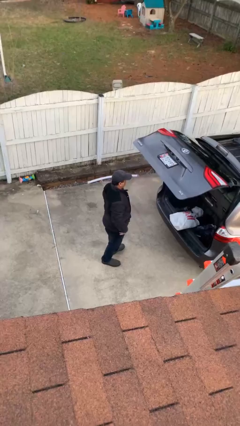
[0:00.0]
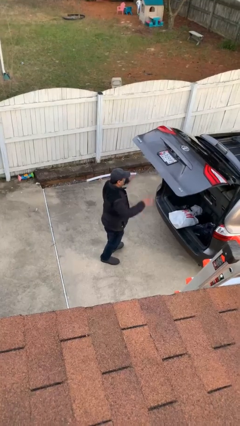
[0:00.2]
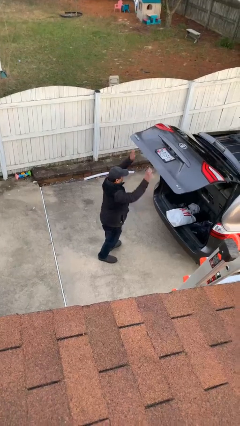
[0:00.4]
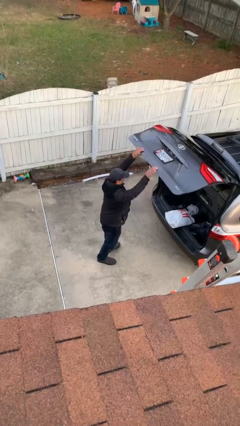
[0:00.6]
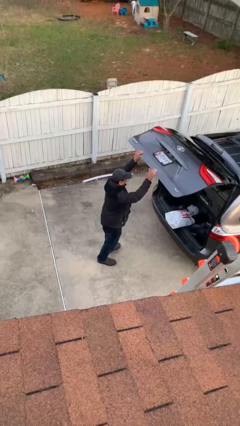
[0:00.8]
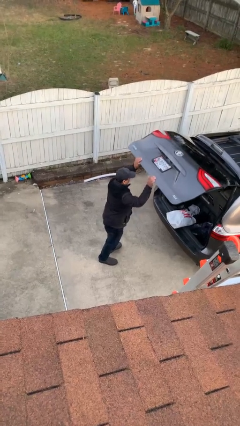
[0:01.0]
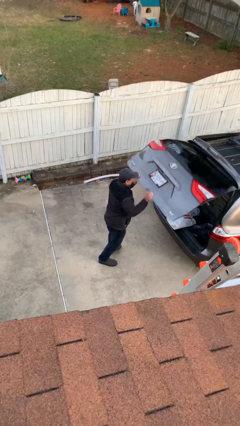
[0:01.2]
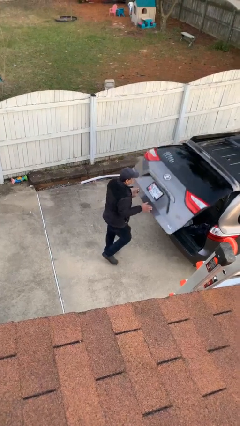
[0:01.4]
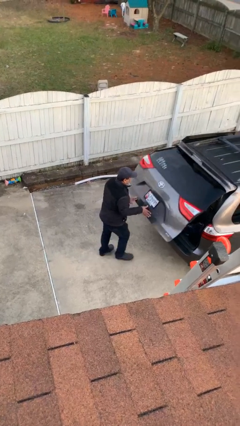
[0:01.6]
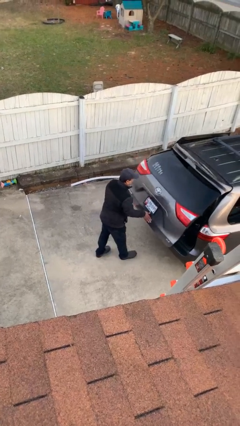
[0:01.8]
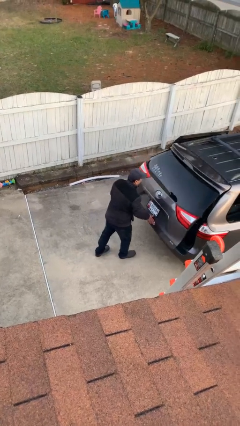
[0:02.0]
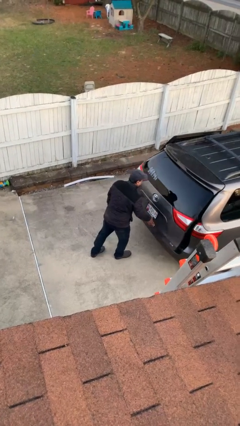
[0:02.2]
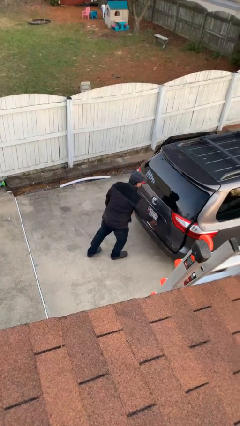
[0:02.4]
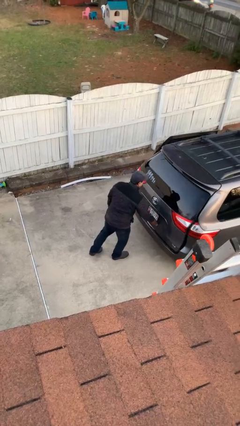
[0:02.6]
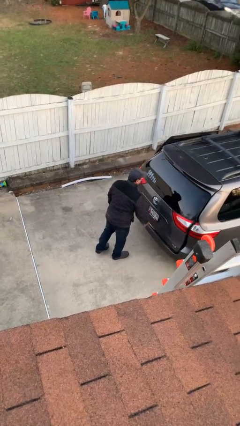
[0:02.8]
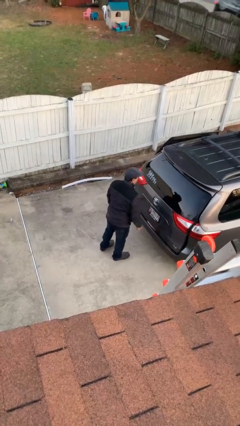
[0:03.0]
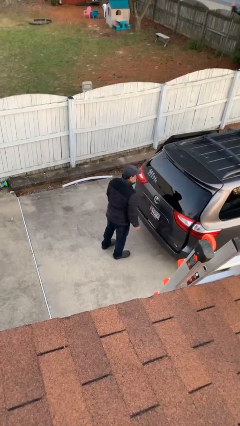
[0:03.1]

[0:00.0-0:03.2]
person closes car trunk

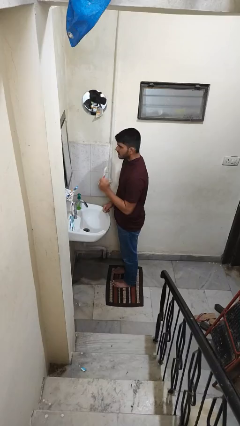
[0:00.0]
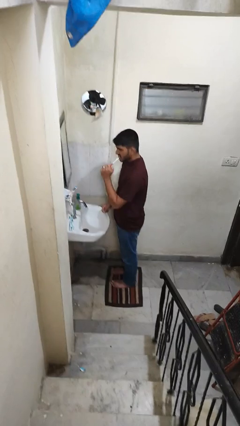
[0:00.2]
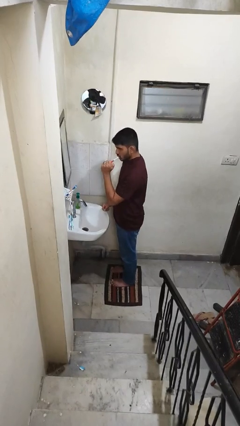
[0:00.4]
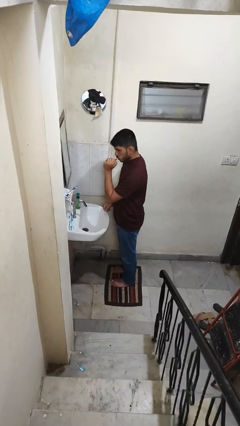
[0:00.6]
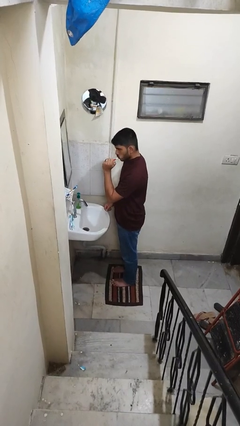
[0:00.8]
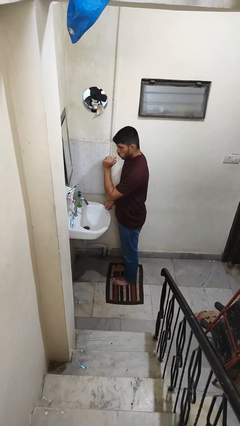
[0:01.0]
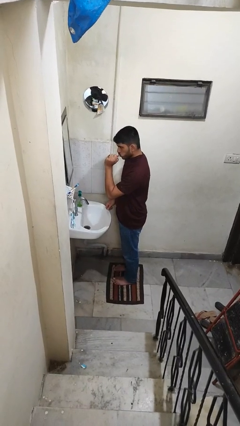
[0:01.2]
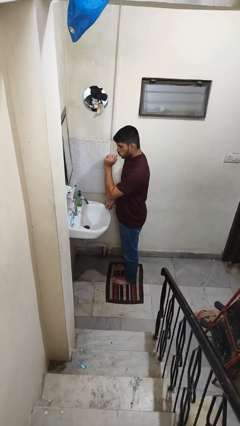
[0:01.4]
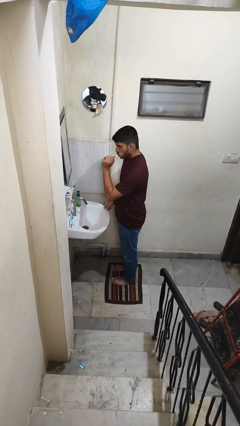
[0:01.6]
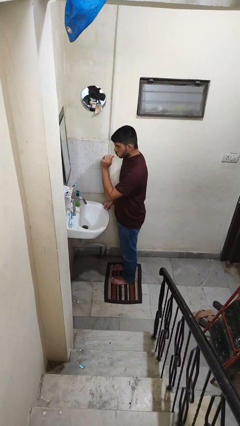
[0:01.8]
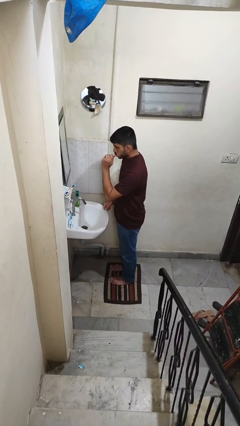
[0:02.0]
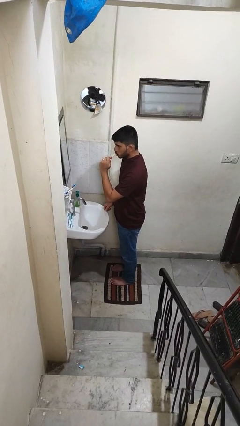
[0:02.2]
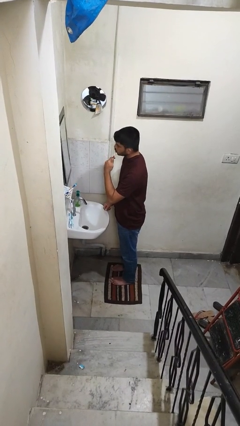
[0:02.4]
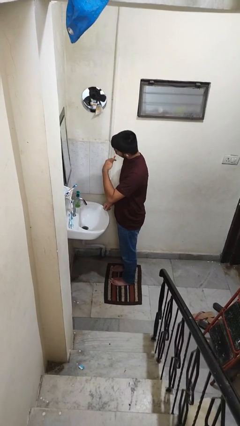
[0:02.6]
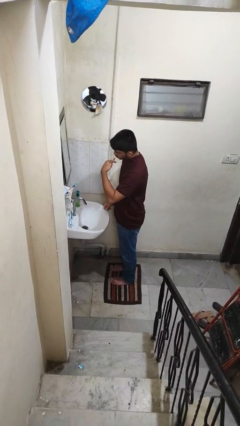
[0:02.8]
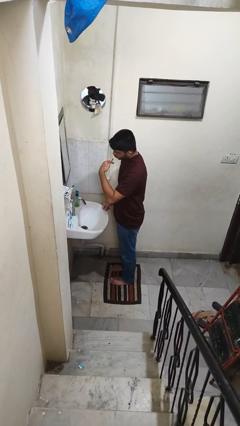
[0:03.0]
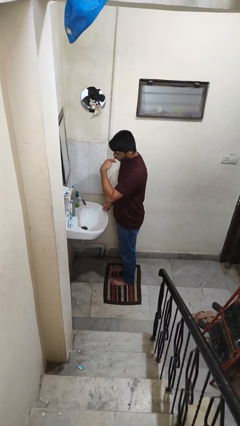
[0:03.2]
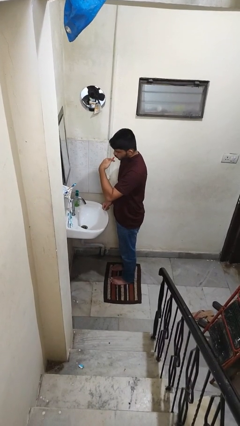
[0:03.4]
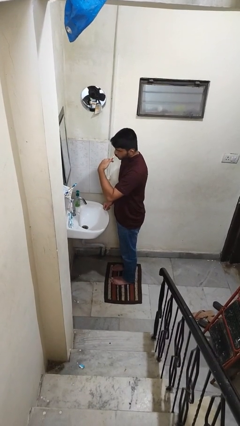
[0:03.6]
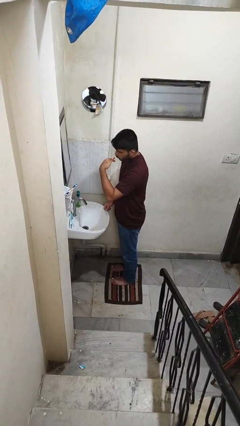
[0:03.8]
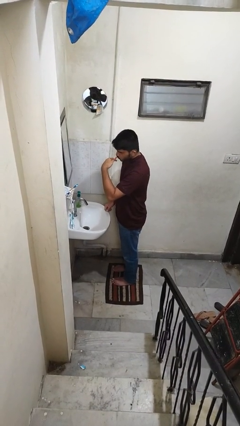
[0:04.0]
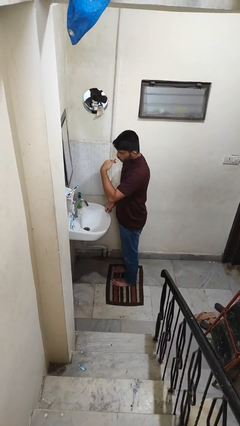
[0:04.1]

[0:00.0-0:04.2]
person brushes teeth

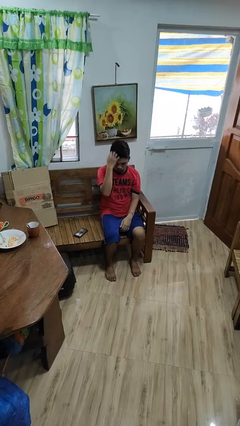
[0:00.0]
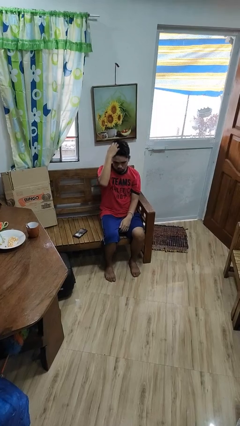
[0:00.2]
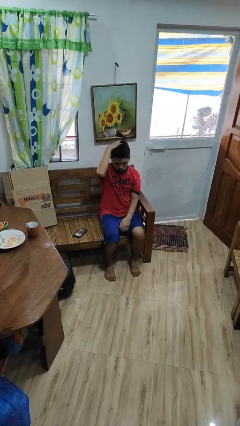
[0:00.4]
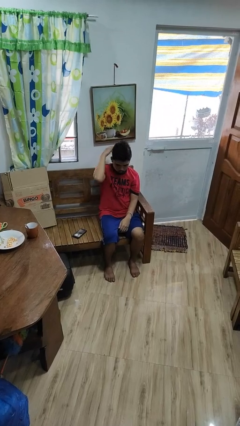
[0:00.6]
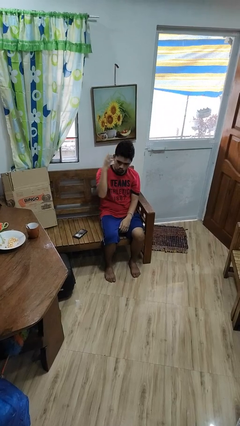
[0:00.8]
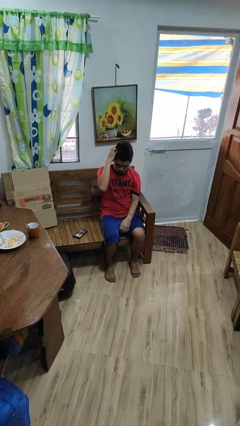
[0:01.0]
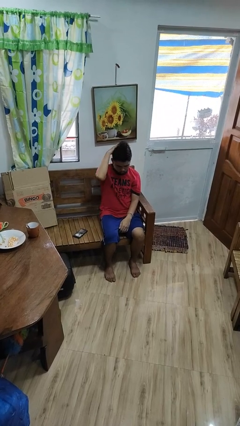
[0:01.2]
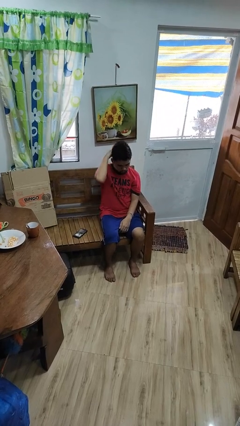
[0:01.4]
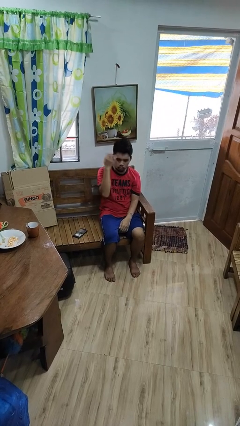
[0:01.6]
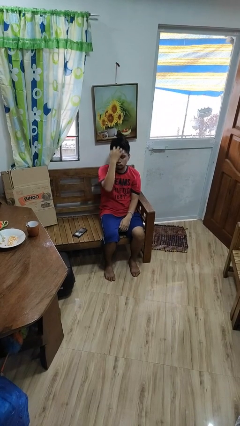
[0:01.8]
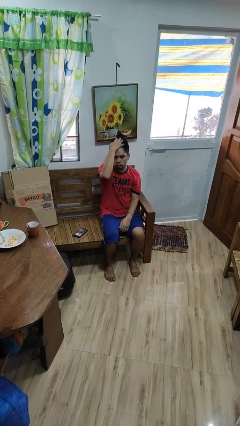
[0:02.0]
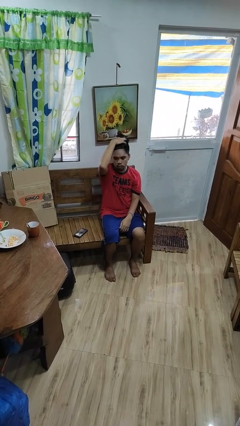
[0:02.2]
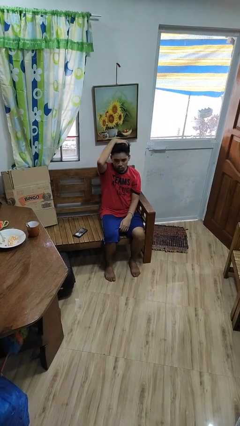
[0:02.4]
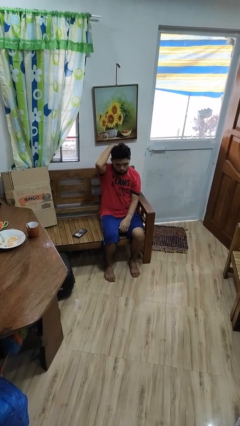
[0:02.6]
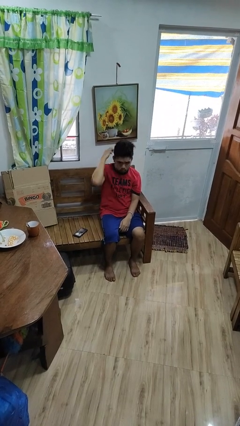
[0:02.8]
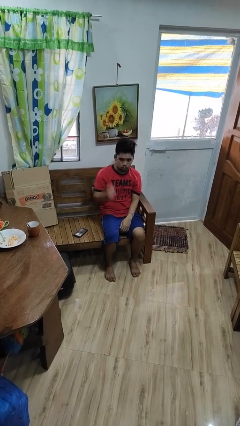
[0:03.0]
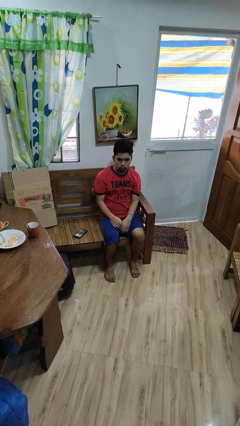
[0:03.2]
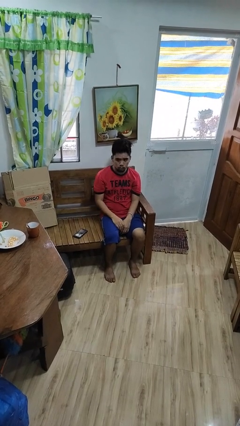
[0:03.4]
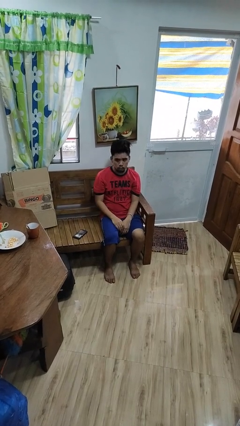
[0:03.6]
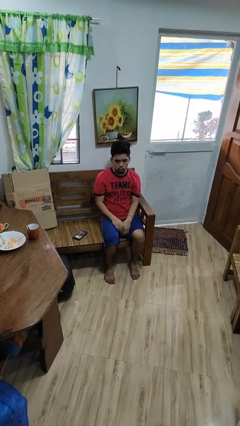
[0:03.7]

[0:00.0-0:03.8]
person strokes hair

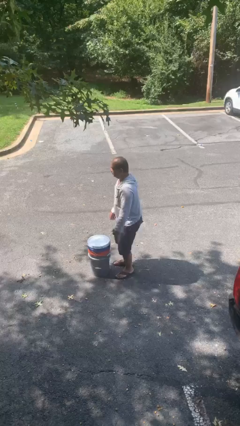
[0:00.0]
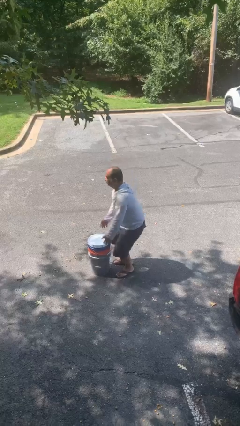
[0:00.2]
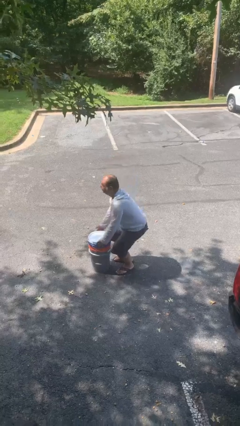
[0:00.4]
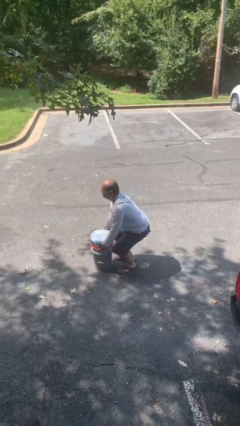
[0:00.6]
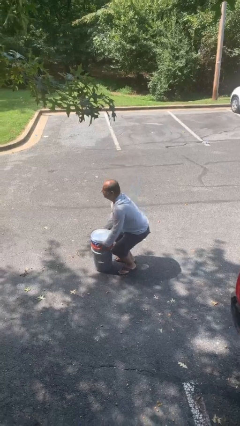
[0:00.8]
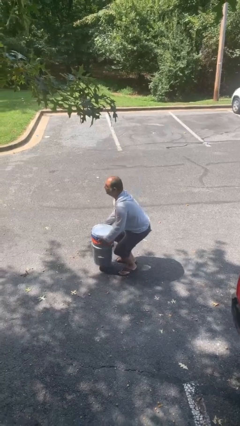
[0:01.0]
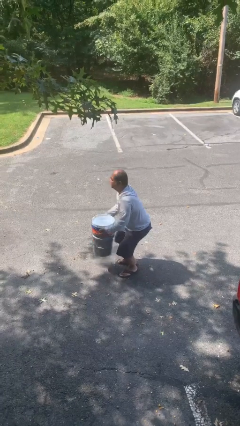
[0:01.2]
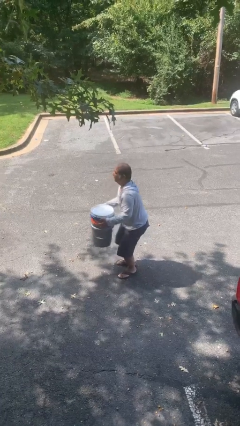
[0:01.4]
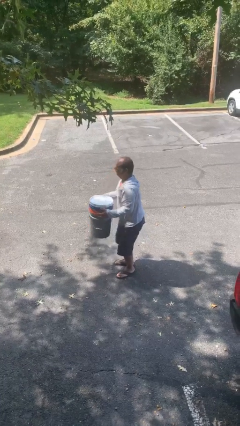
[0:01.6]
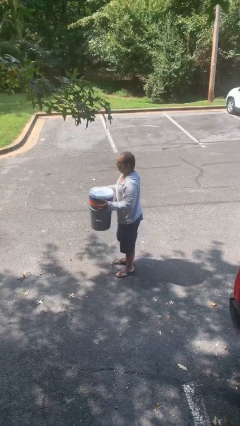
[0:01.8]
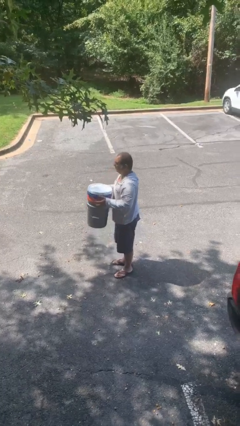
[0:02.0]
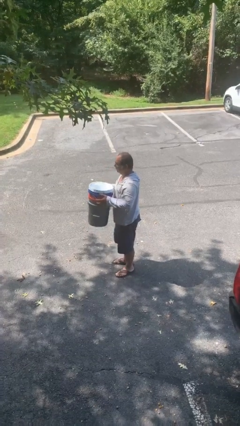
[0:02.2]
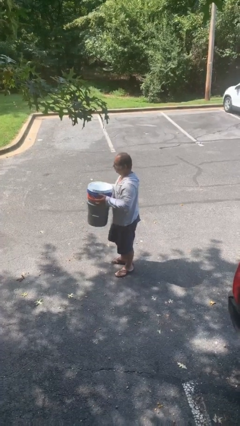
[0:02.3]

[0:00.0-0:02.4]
person picks up object from floor

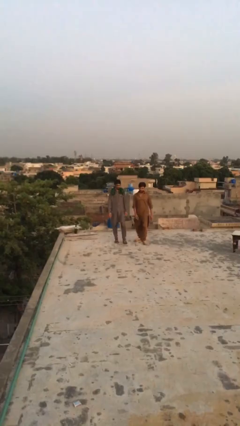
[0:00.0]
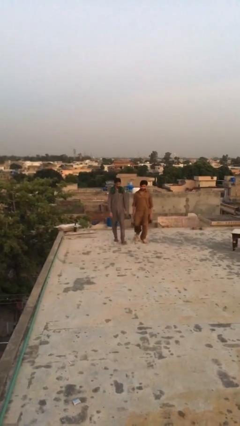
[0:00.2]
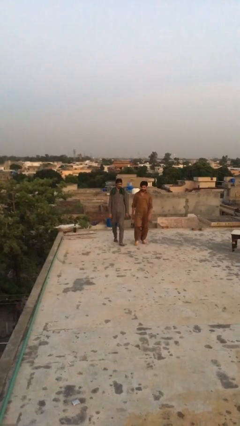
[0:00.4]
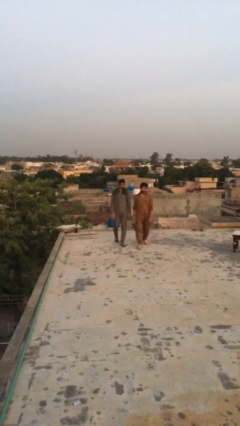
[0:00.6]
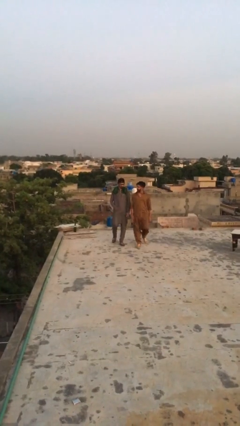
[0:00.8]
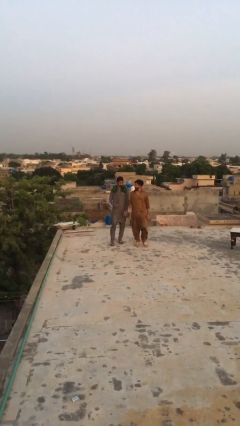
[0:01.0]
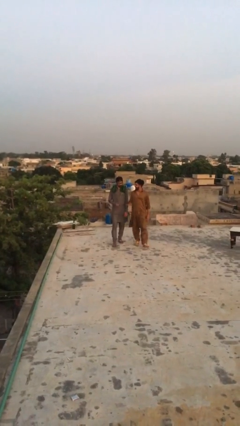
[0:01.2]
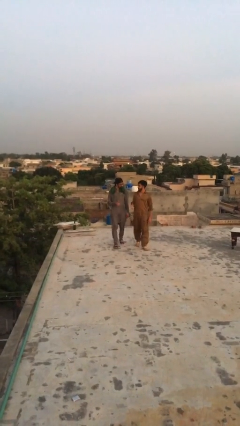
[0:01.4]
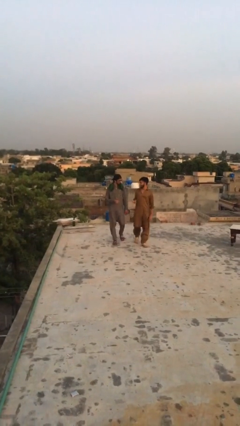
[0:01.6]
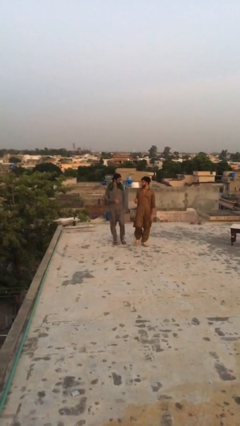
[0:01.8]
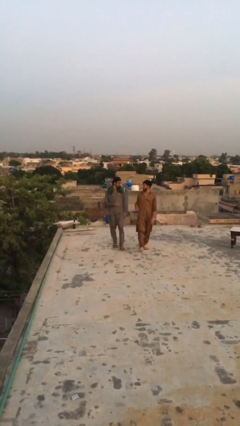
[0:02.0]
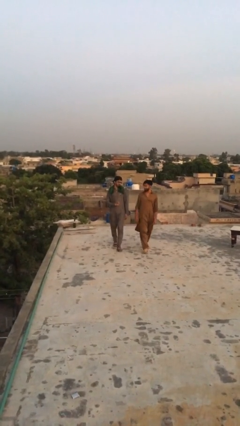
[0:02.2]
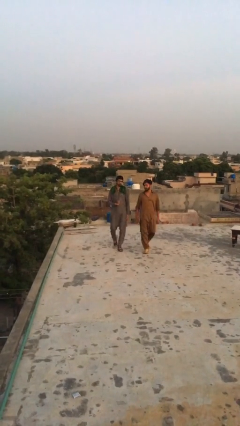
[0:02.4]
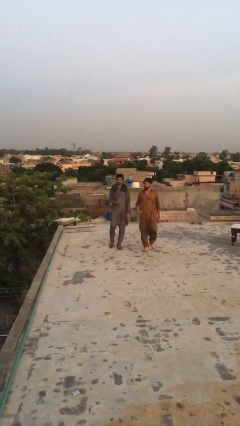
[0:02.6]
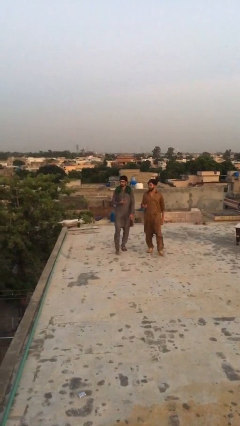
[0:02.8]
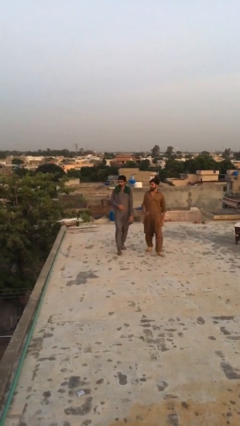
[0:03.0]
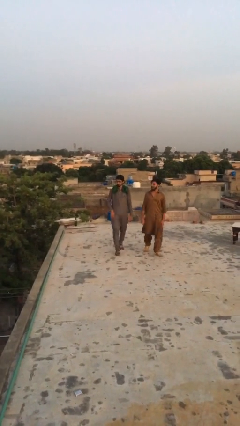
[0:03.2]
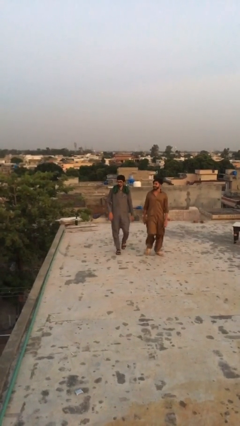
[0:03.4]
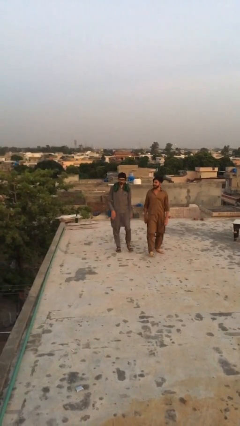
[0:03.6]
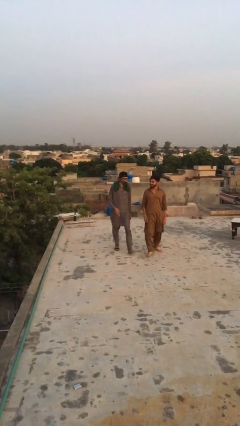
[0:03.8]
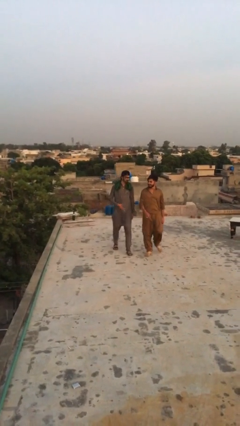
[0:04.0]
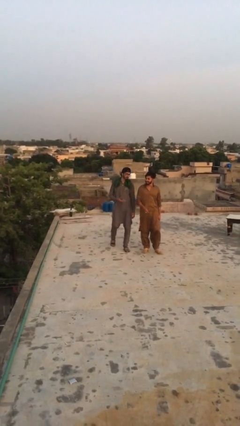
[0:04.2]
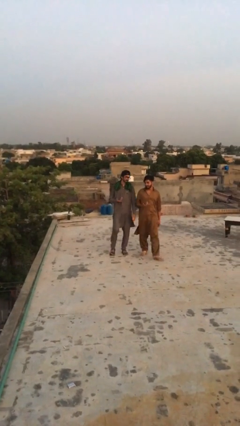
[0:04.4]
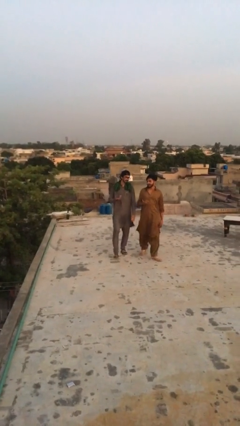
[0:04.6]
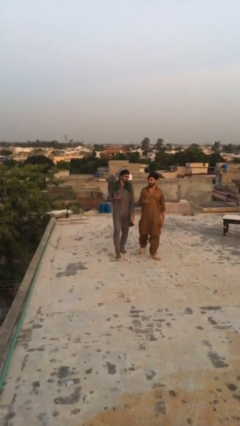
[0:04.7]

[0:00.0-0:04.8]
person talks to person
